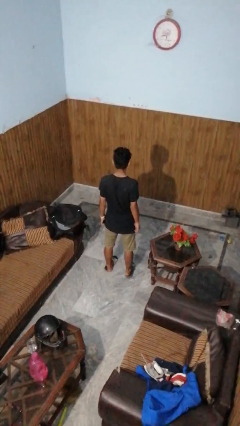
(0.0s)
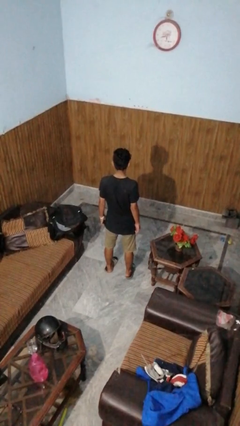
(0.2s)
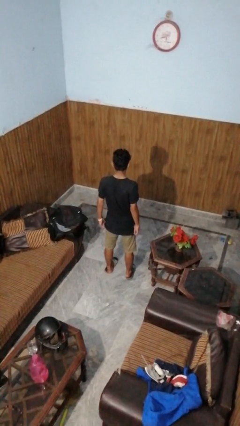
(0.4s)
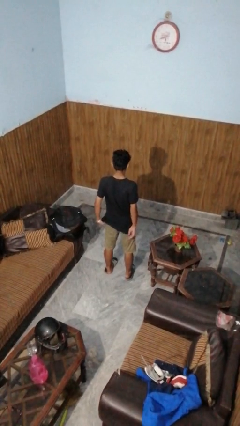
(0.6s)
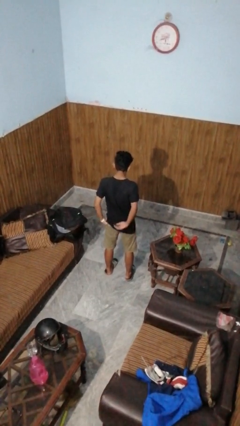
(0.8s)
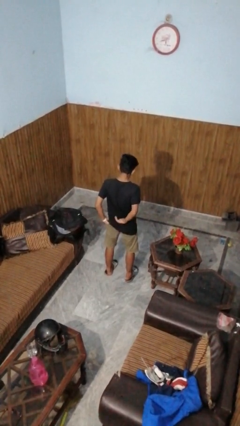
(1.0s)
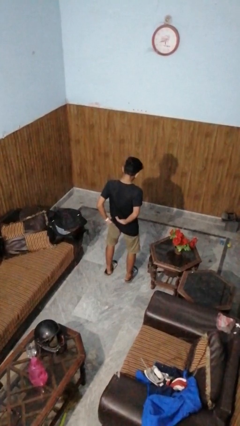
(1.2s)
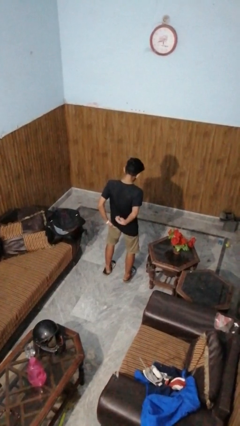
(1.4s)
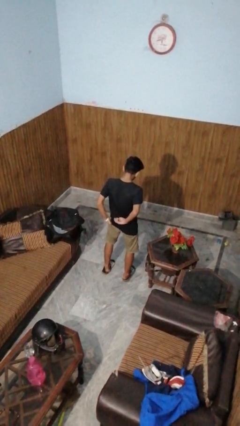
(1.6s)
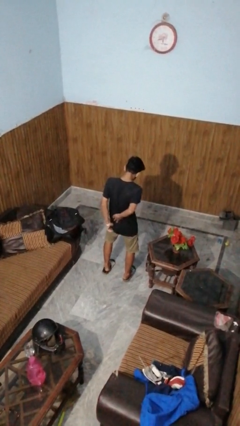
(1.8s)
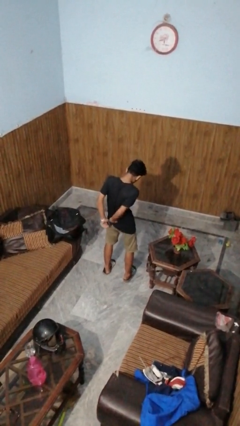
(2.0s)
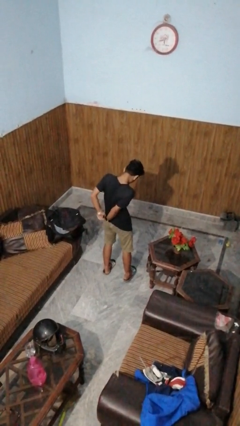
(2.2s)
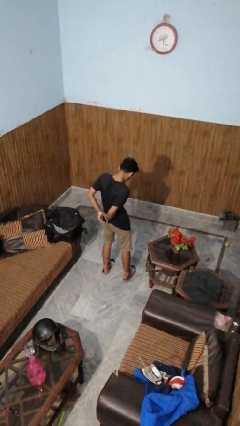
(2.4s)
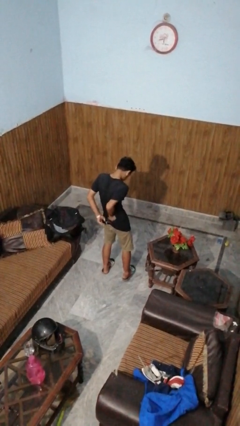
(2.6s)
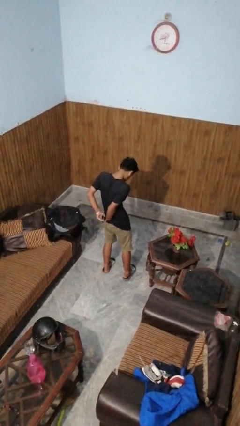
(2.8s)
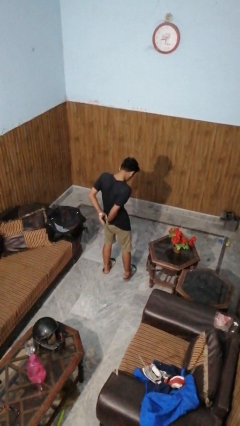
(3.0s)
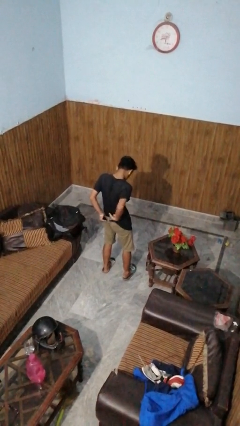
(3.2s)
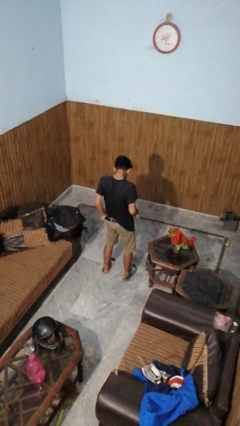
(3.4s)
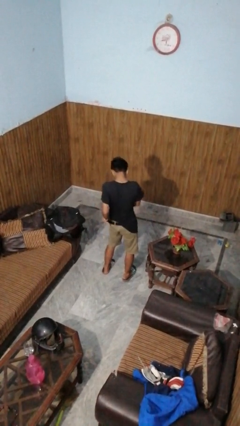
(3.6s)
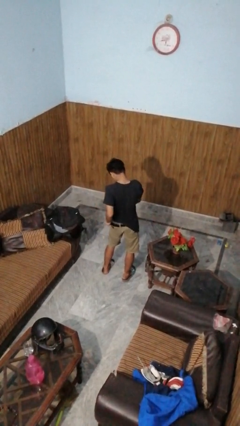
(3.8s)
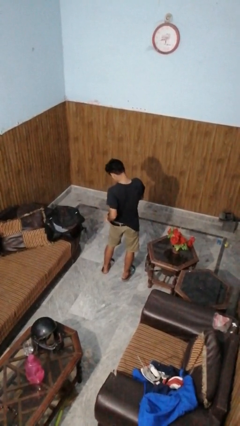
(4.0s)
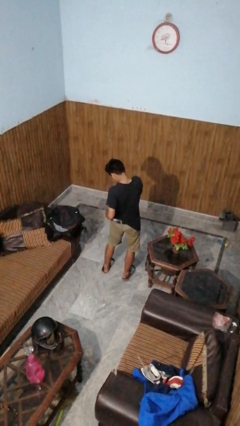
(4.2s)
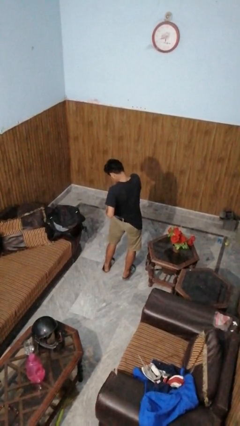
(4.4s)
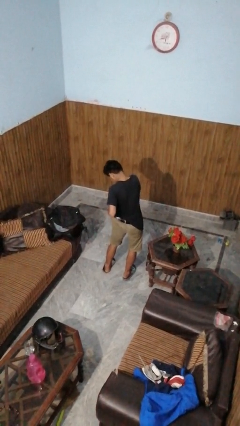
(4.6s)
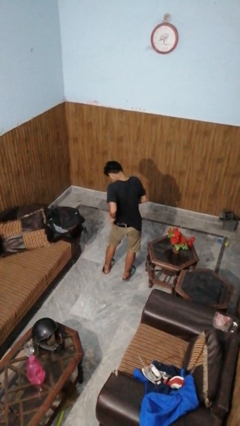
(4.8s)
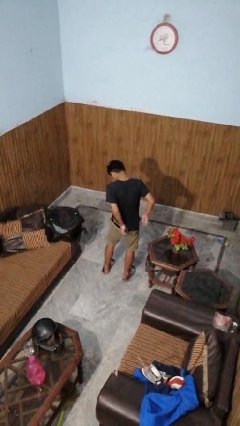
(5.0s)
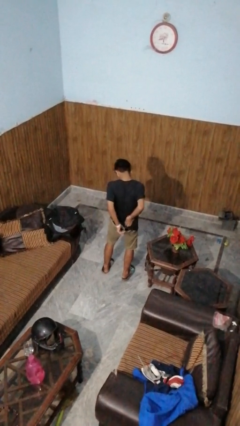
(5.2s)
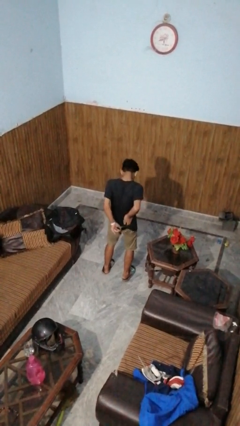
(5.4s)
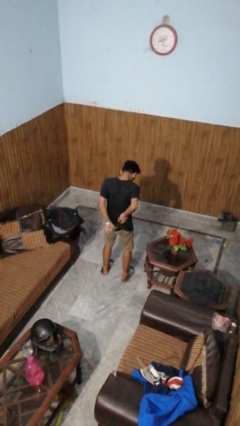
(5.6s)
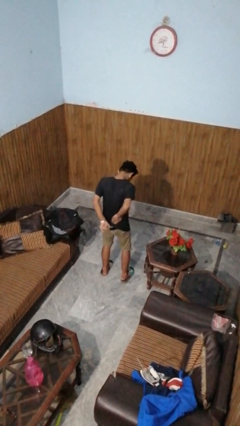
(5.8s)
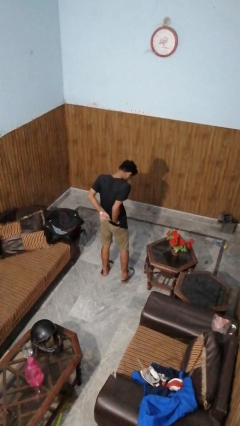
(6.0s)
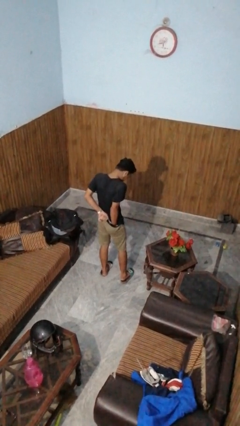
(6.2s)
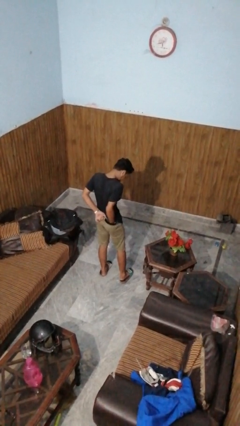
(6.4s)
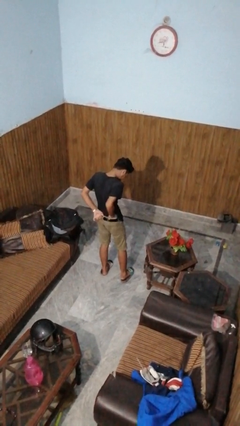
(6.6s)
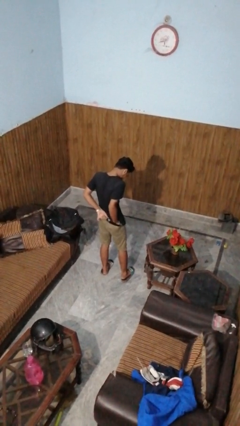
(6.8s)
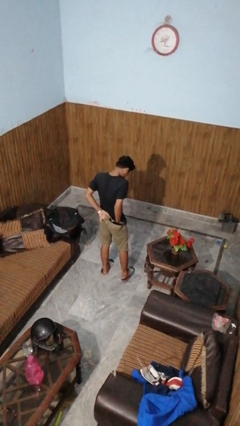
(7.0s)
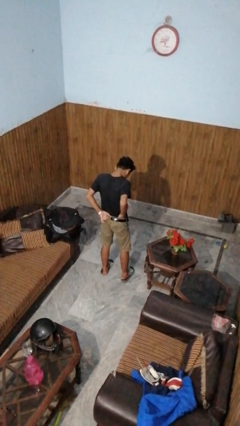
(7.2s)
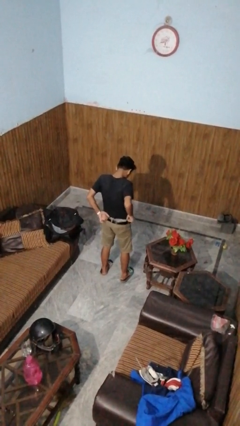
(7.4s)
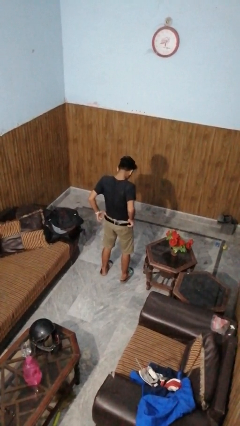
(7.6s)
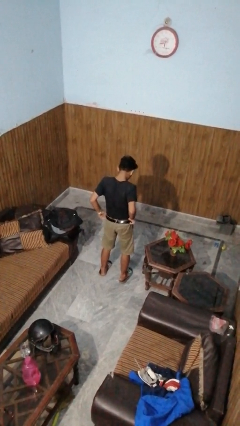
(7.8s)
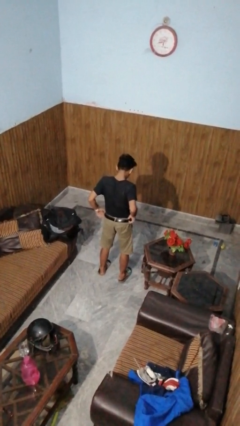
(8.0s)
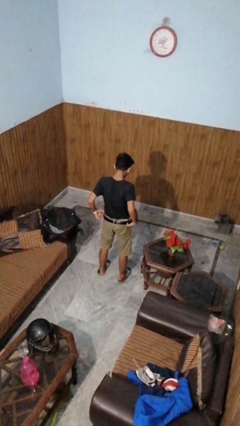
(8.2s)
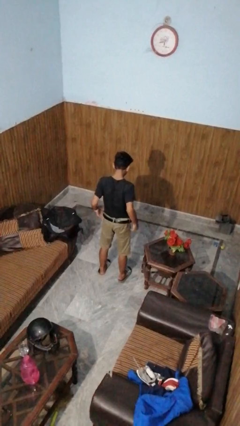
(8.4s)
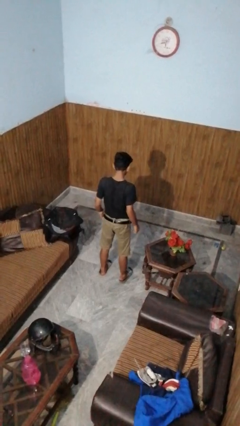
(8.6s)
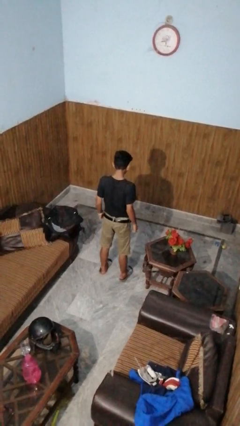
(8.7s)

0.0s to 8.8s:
person tucks in shirt

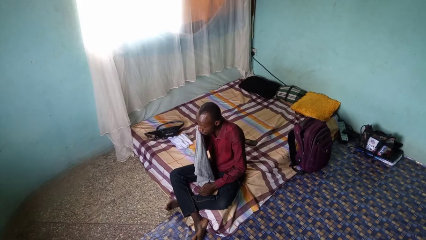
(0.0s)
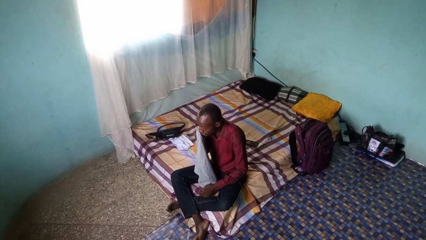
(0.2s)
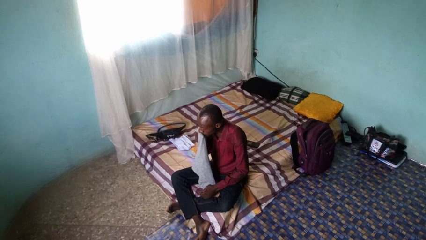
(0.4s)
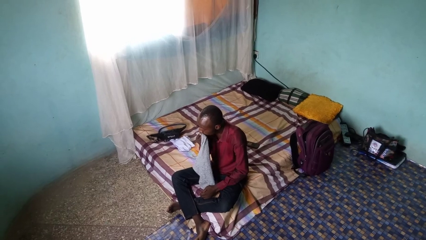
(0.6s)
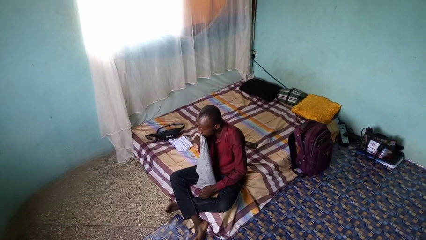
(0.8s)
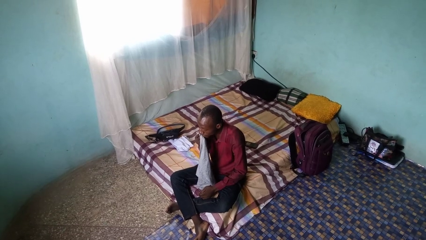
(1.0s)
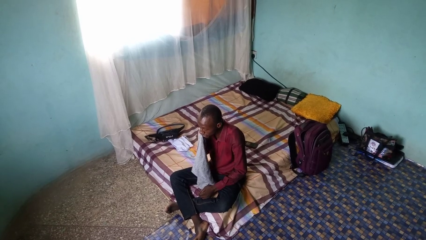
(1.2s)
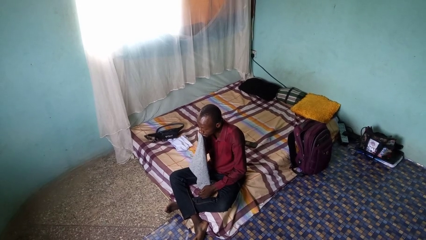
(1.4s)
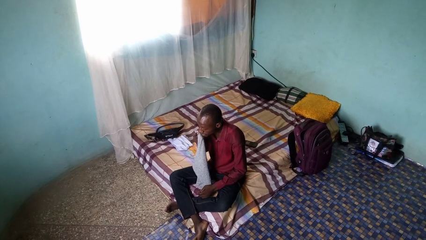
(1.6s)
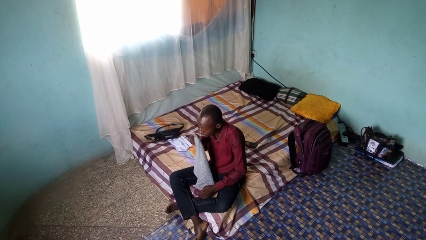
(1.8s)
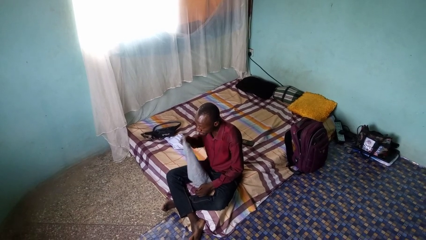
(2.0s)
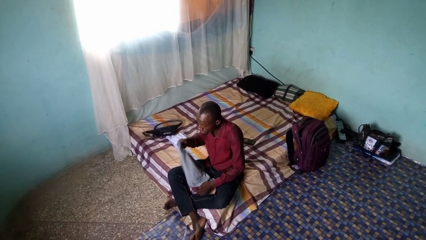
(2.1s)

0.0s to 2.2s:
person wipes mouth with napkin

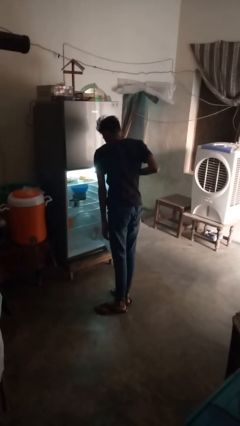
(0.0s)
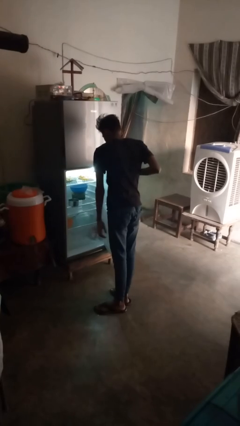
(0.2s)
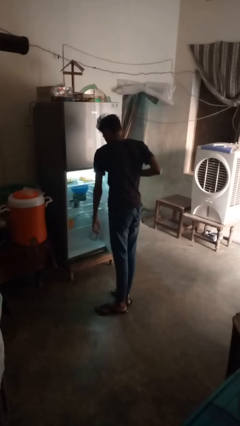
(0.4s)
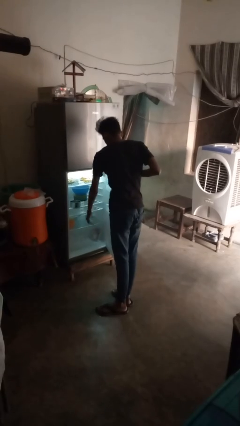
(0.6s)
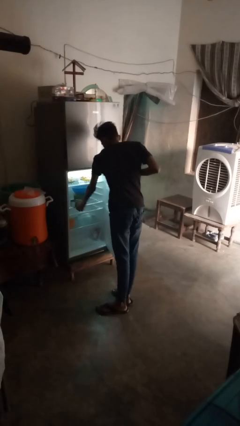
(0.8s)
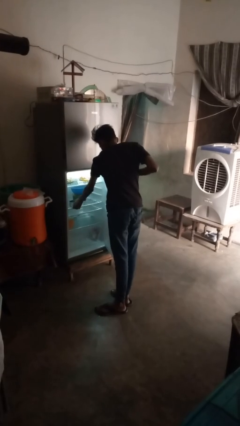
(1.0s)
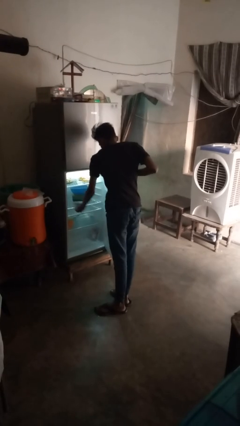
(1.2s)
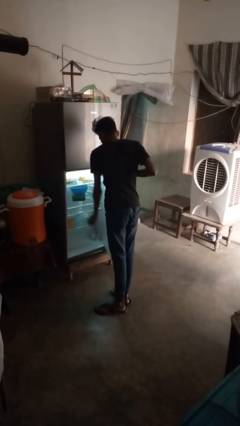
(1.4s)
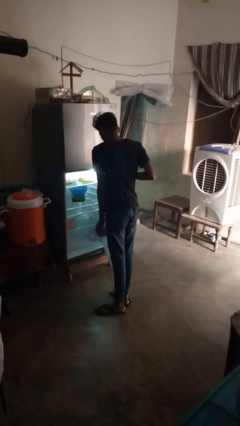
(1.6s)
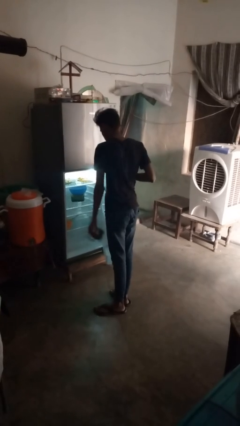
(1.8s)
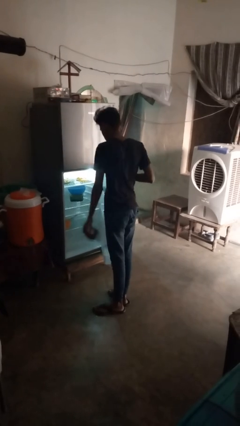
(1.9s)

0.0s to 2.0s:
person takes object from refrigerator

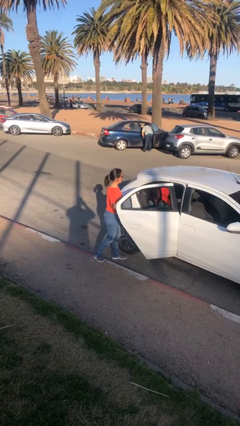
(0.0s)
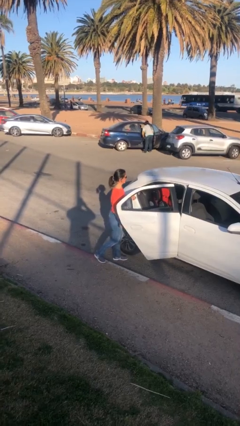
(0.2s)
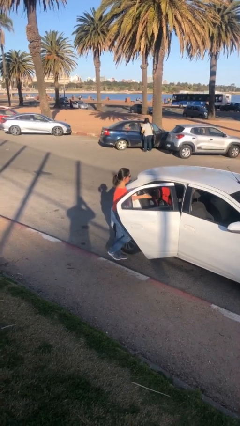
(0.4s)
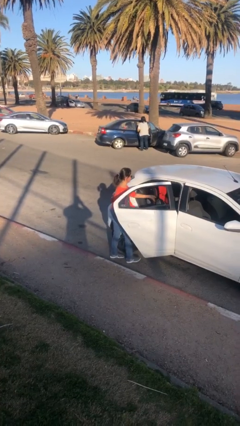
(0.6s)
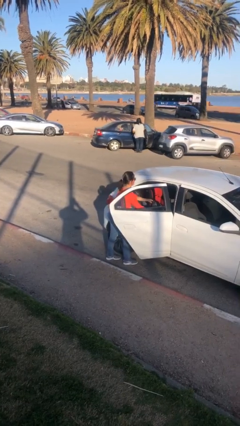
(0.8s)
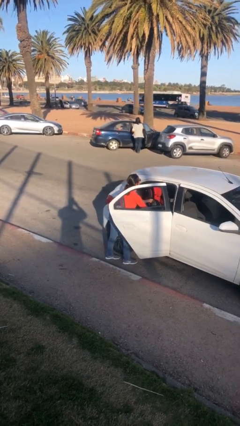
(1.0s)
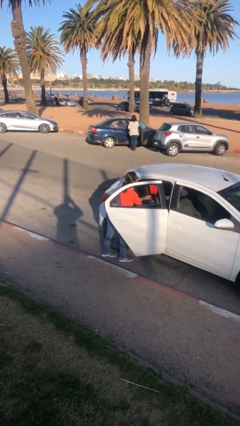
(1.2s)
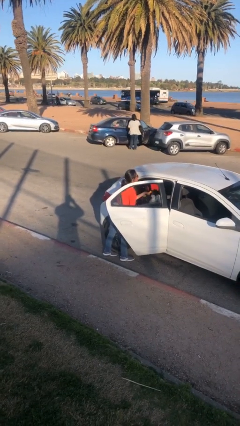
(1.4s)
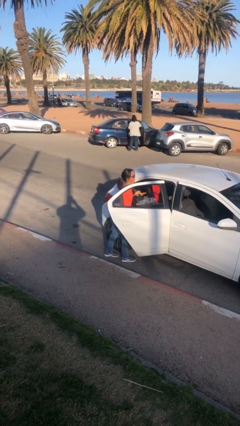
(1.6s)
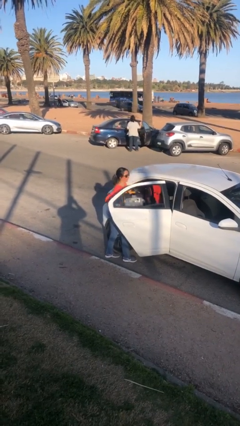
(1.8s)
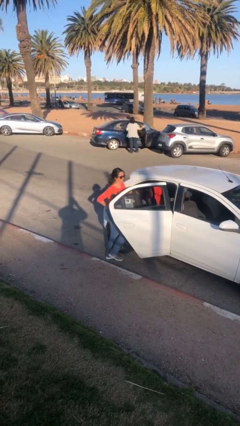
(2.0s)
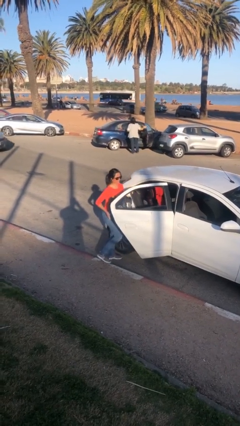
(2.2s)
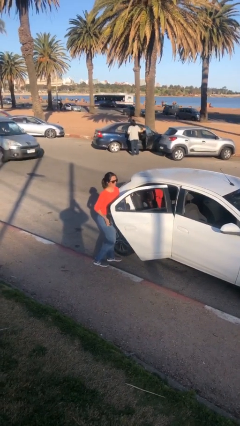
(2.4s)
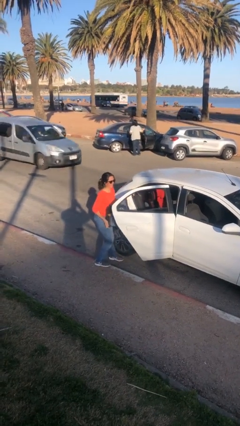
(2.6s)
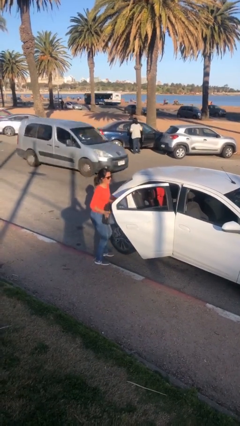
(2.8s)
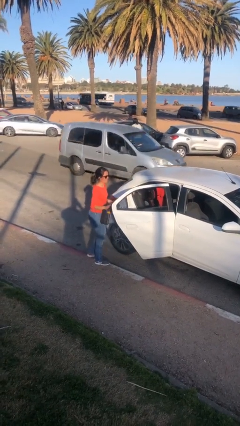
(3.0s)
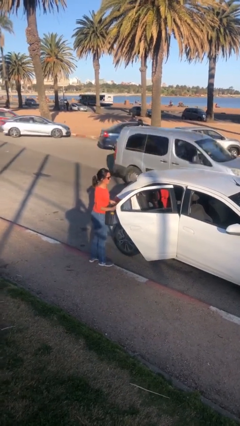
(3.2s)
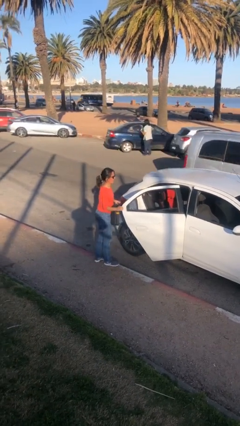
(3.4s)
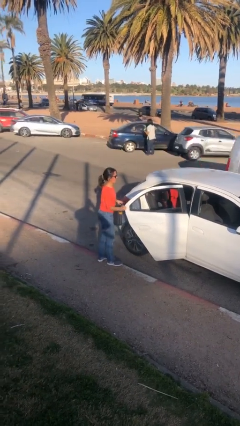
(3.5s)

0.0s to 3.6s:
person unloads car

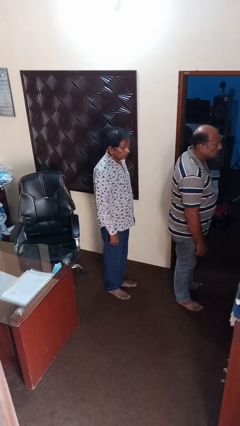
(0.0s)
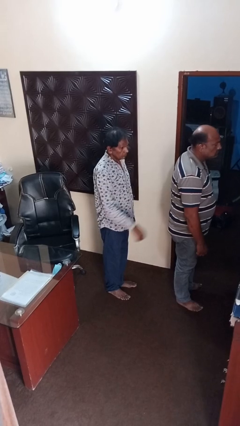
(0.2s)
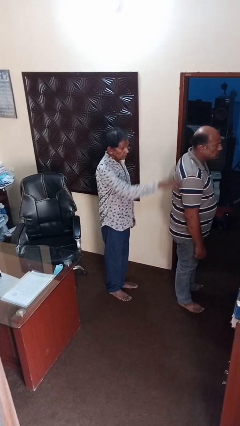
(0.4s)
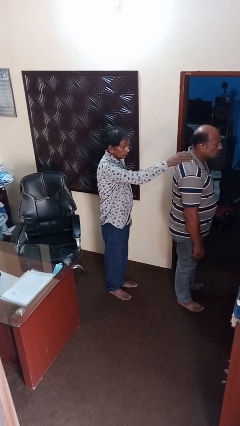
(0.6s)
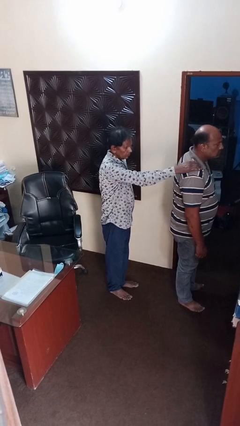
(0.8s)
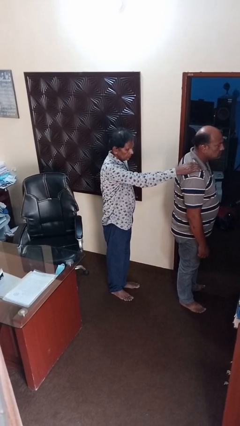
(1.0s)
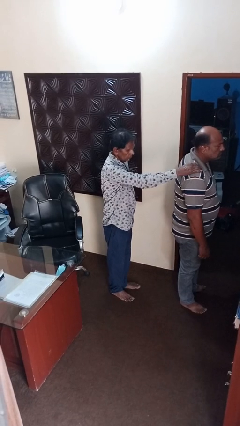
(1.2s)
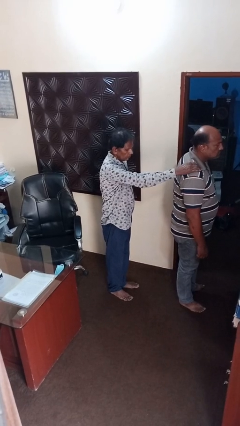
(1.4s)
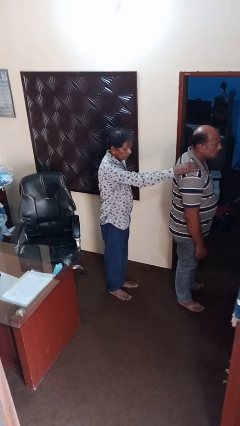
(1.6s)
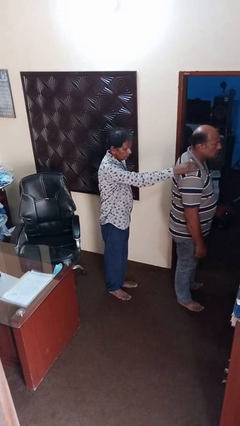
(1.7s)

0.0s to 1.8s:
person grabs person by shoulder
